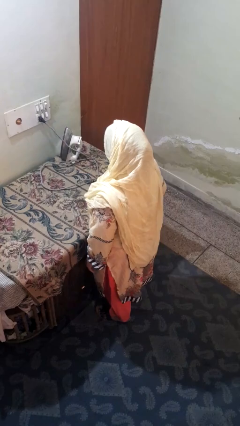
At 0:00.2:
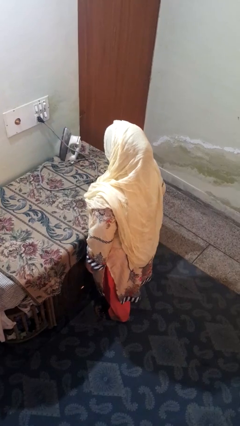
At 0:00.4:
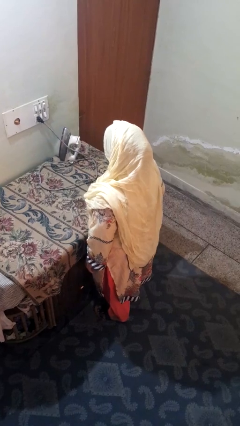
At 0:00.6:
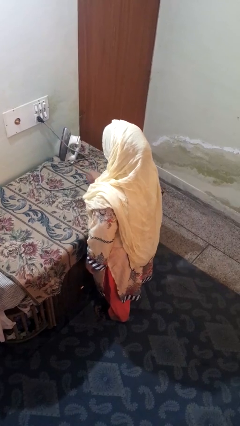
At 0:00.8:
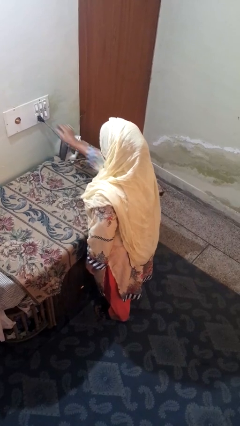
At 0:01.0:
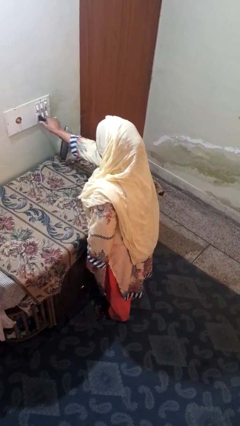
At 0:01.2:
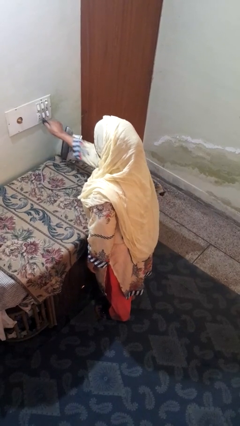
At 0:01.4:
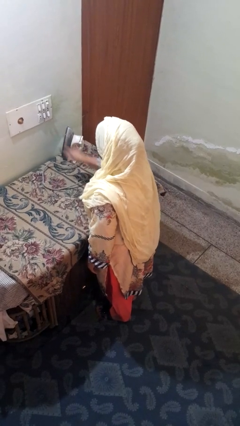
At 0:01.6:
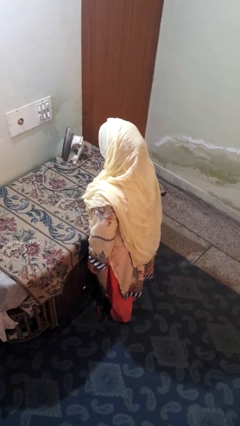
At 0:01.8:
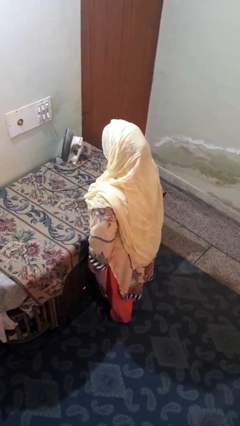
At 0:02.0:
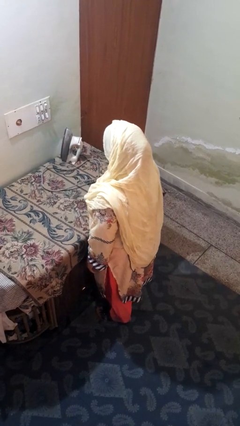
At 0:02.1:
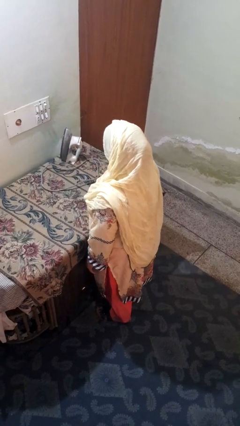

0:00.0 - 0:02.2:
person unplugs from electrical socket

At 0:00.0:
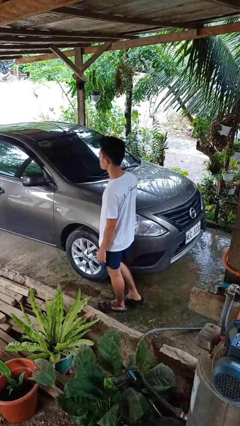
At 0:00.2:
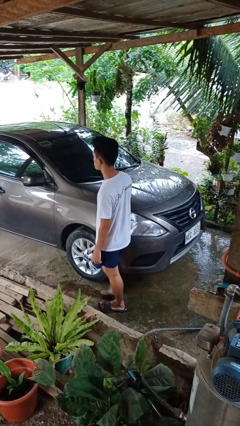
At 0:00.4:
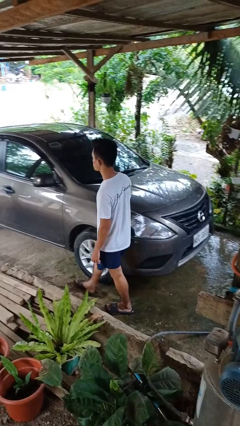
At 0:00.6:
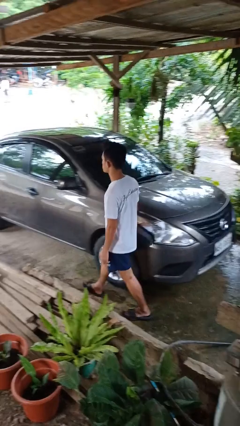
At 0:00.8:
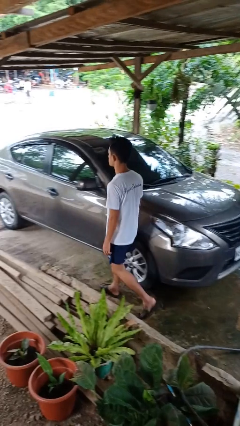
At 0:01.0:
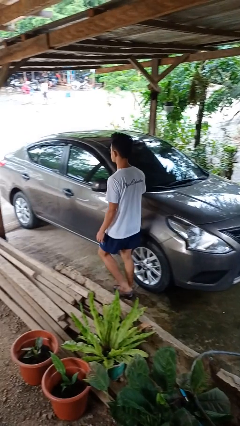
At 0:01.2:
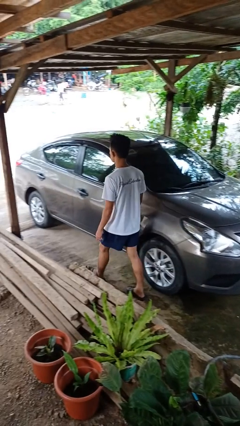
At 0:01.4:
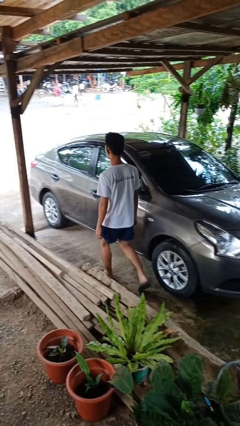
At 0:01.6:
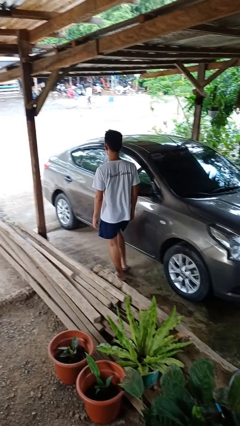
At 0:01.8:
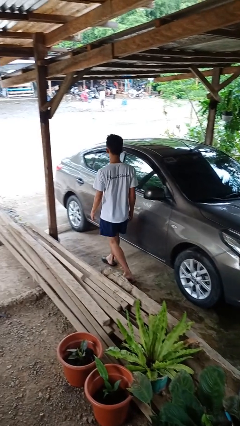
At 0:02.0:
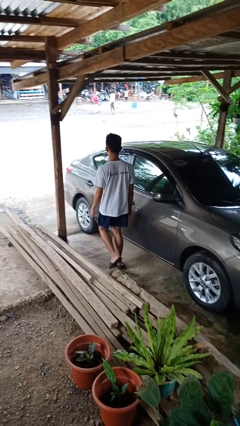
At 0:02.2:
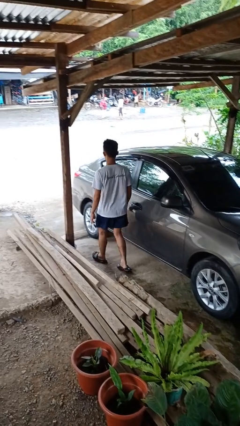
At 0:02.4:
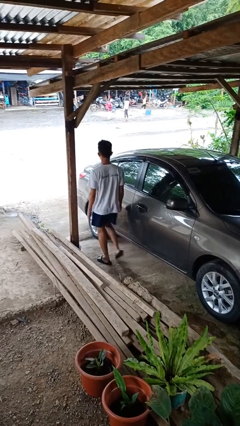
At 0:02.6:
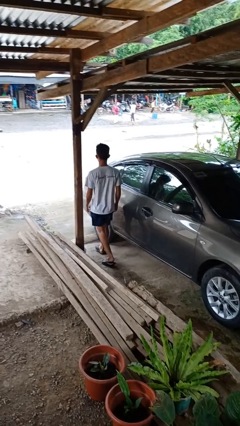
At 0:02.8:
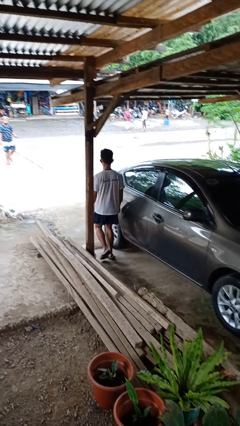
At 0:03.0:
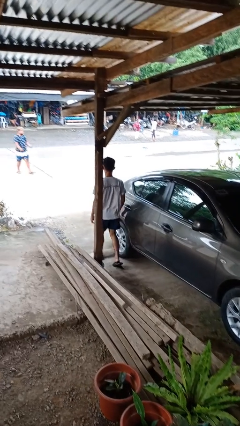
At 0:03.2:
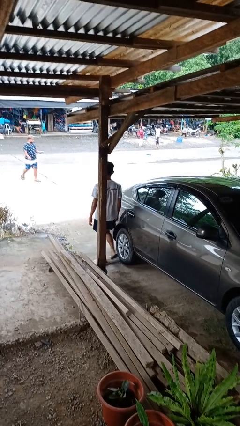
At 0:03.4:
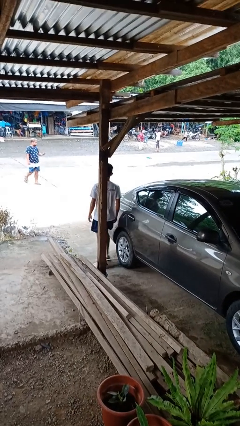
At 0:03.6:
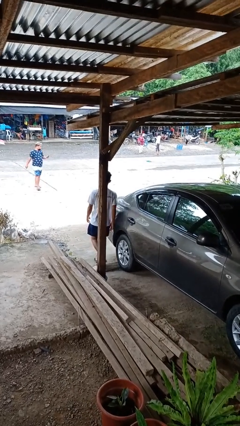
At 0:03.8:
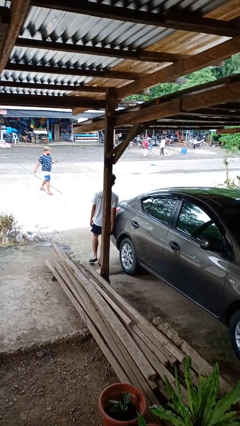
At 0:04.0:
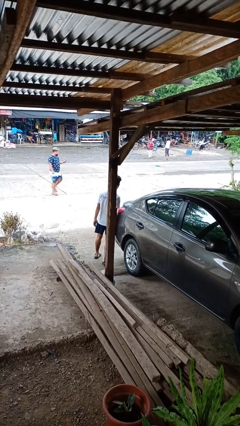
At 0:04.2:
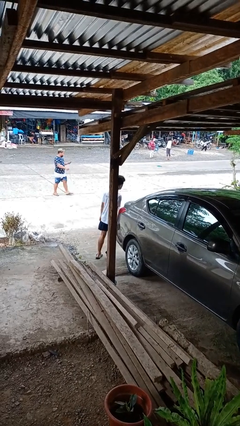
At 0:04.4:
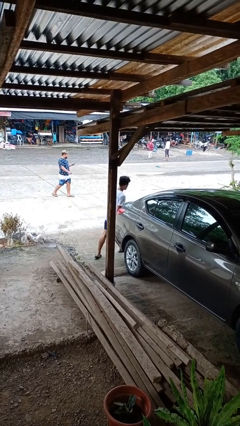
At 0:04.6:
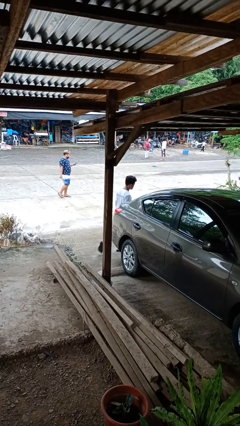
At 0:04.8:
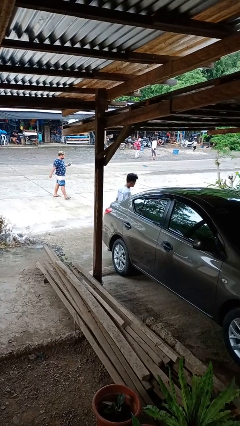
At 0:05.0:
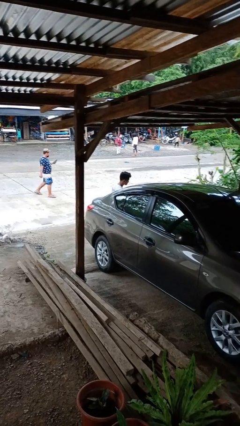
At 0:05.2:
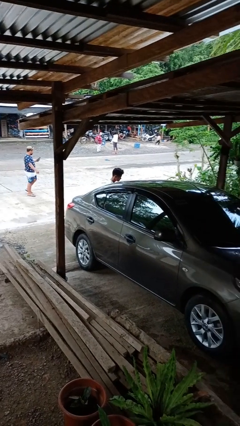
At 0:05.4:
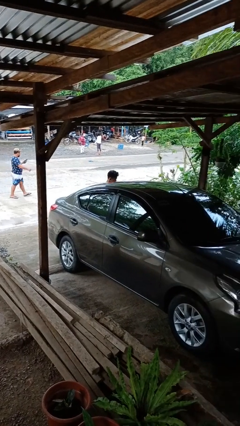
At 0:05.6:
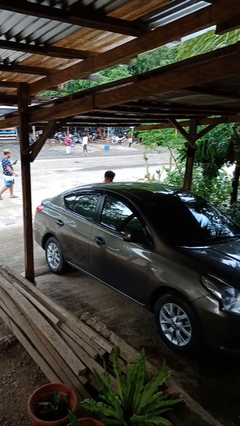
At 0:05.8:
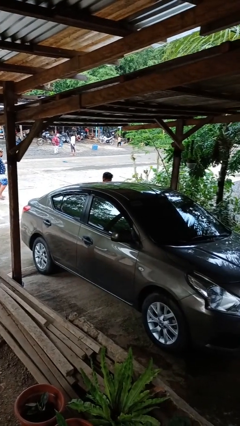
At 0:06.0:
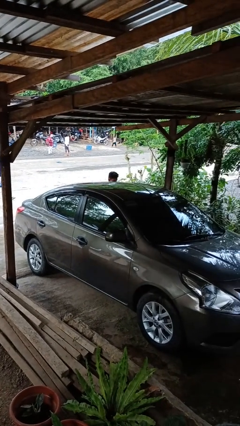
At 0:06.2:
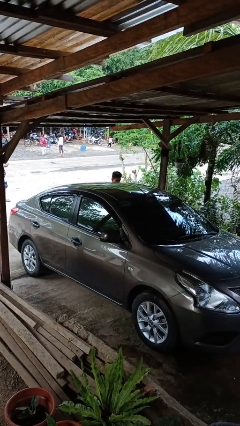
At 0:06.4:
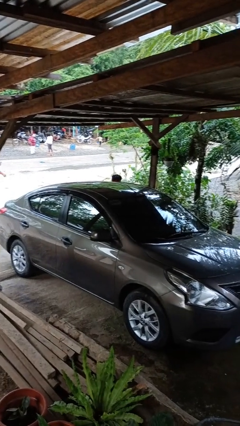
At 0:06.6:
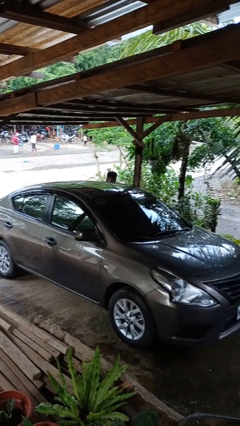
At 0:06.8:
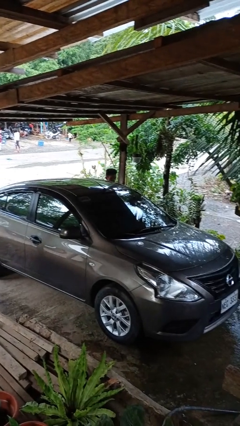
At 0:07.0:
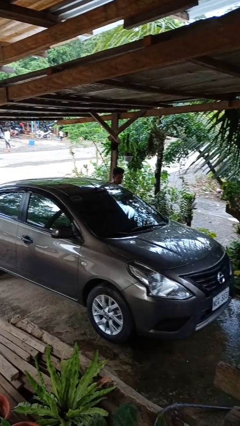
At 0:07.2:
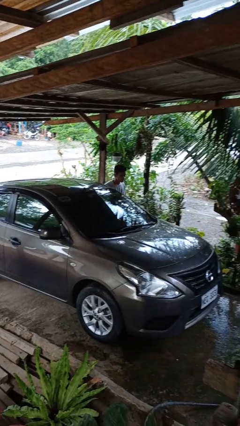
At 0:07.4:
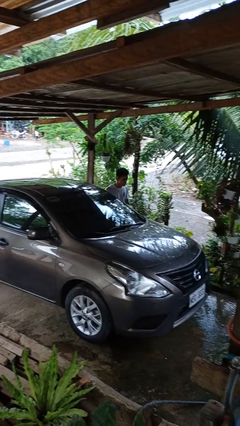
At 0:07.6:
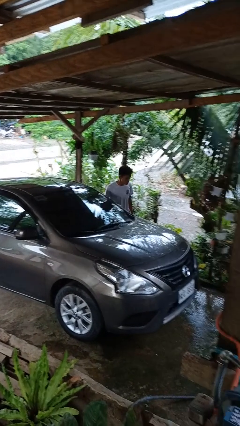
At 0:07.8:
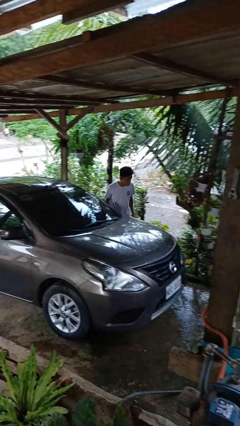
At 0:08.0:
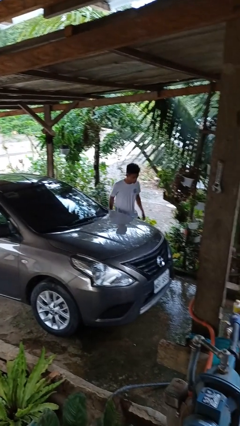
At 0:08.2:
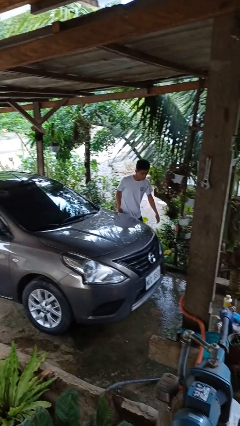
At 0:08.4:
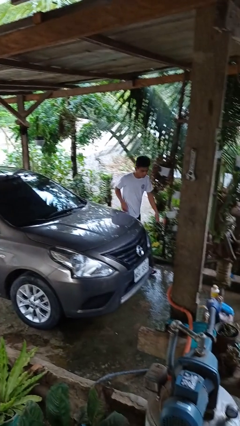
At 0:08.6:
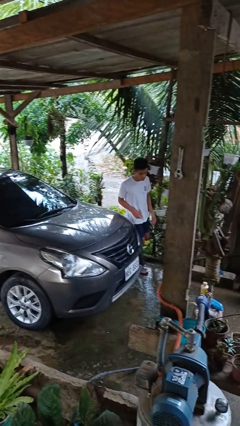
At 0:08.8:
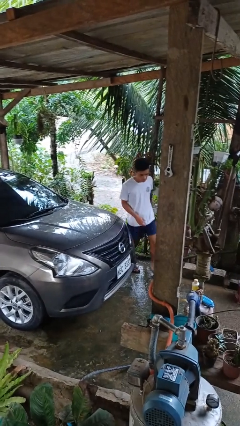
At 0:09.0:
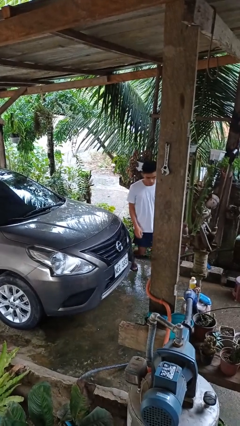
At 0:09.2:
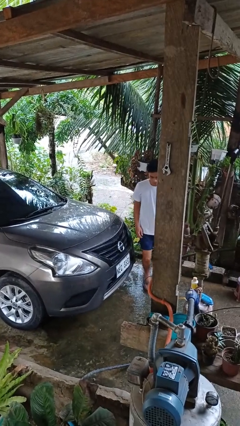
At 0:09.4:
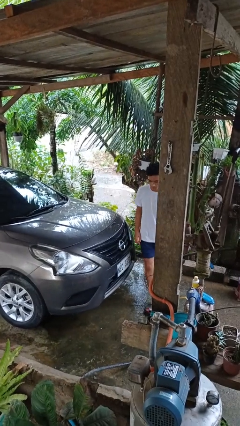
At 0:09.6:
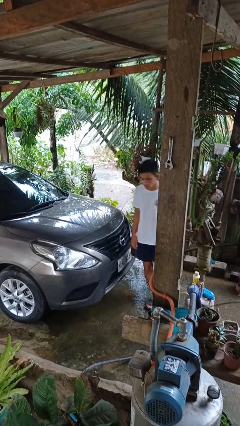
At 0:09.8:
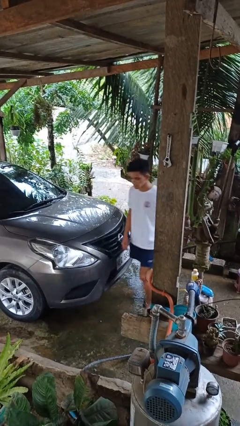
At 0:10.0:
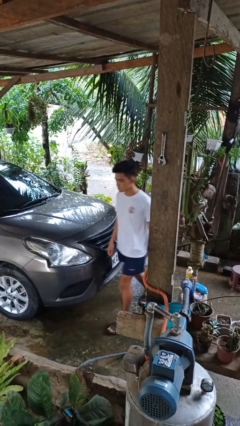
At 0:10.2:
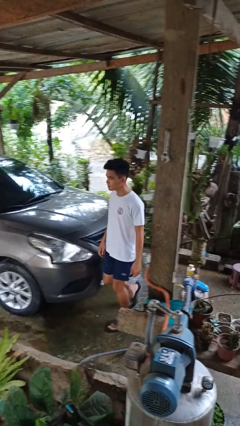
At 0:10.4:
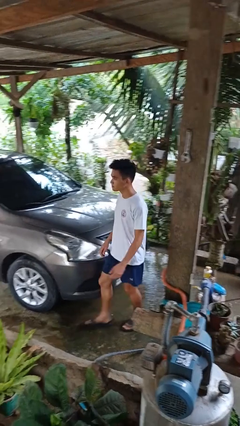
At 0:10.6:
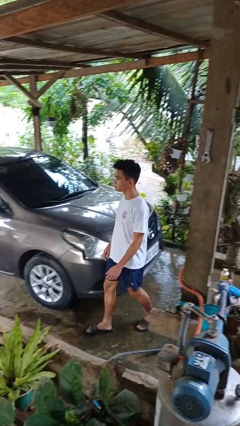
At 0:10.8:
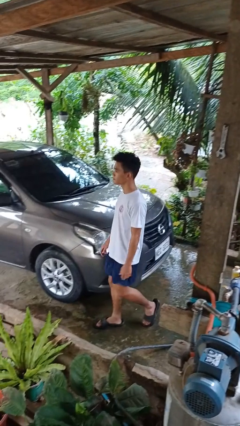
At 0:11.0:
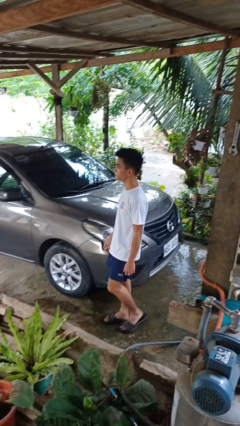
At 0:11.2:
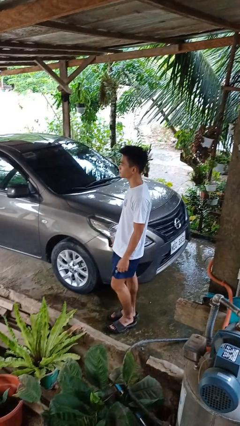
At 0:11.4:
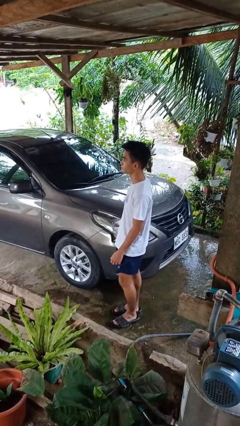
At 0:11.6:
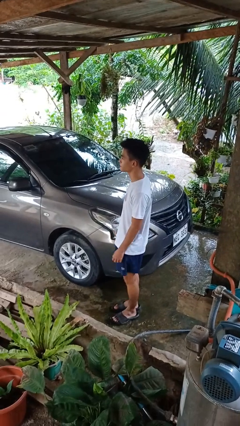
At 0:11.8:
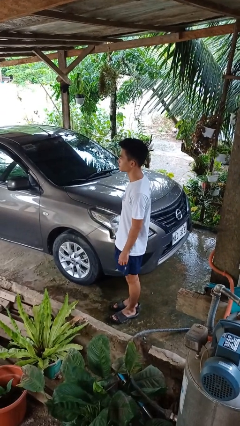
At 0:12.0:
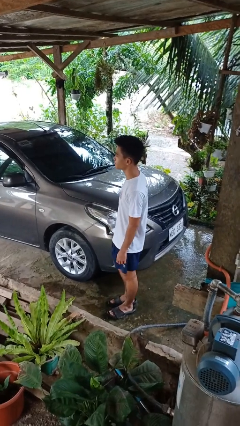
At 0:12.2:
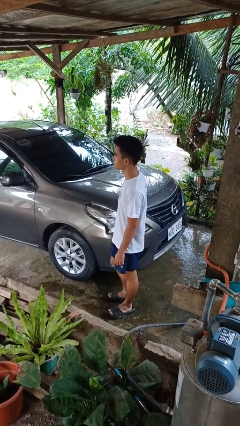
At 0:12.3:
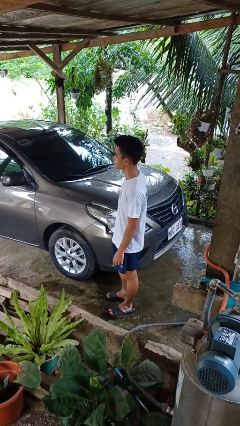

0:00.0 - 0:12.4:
person walks around car

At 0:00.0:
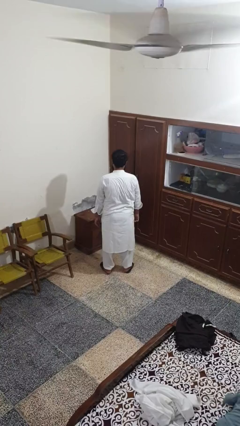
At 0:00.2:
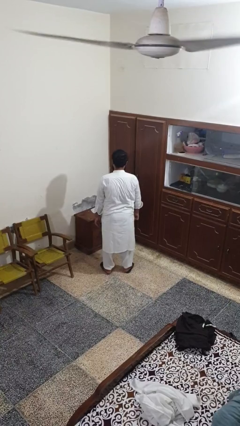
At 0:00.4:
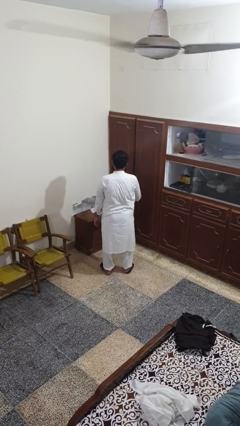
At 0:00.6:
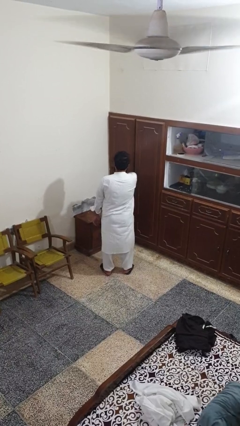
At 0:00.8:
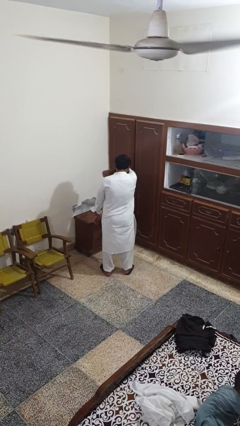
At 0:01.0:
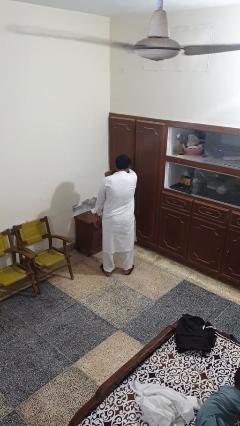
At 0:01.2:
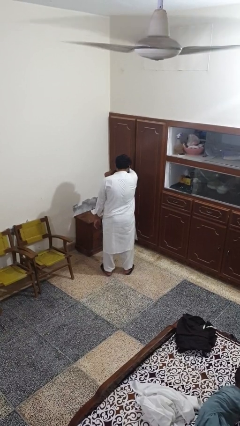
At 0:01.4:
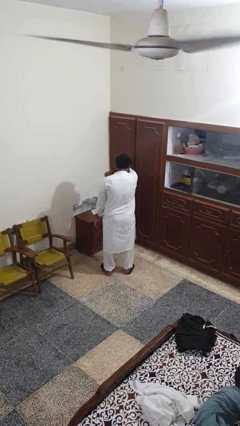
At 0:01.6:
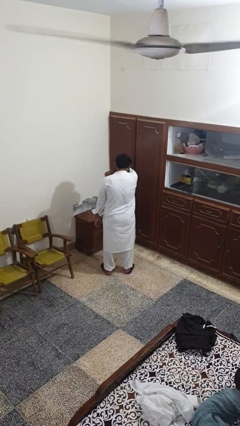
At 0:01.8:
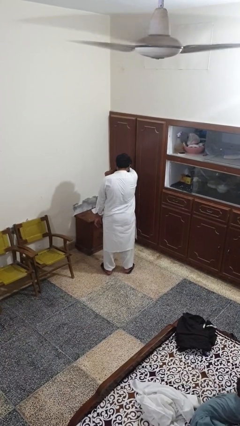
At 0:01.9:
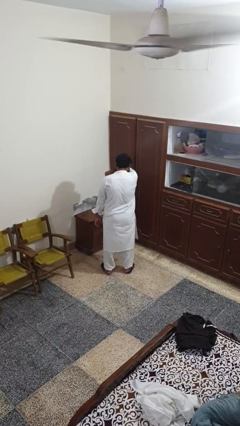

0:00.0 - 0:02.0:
person sneezes into arm

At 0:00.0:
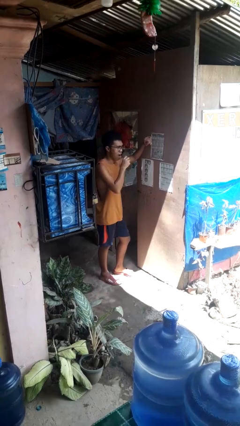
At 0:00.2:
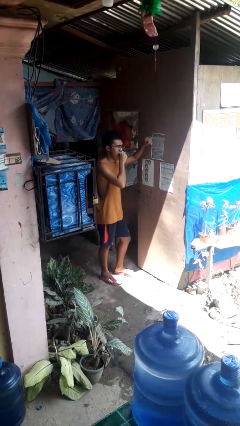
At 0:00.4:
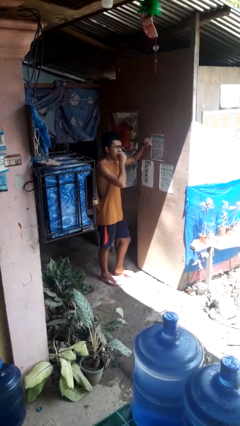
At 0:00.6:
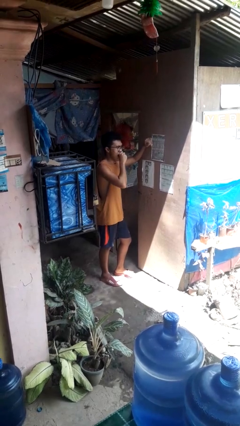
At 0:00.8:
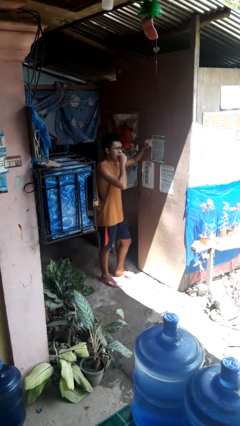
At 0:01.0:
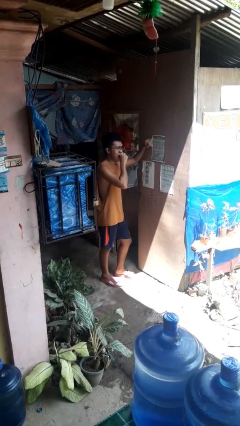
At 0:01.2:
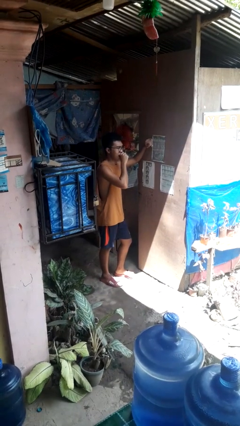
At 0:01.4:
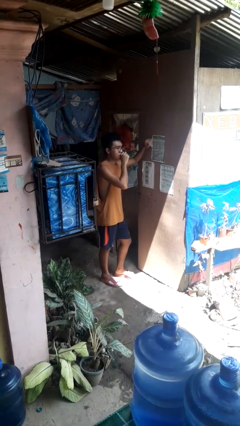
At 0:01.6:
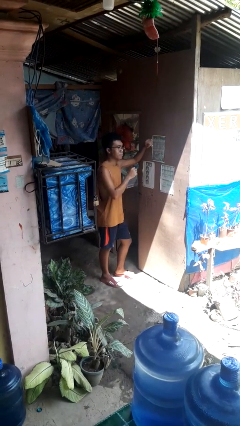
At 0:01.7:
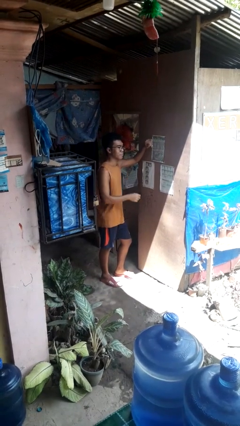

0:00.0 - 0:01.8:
person yawns
